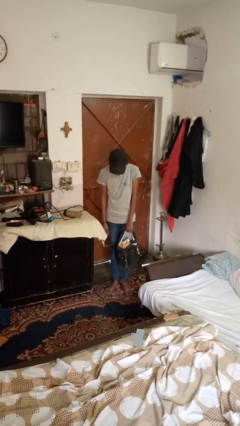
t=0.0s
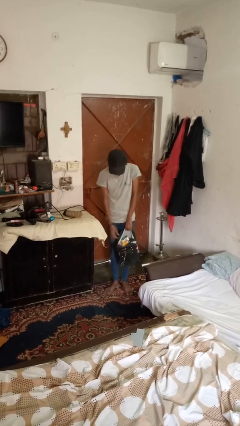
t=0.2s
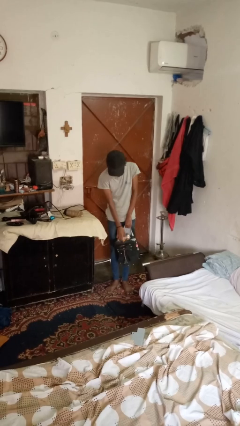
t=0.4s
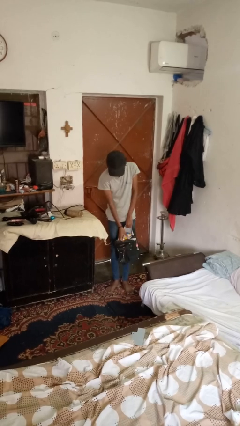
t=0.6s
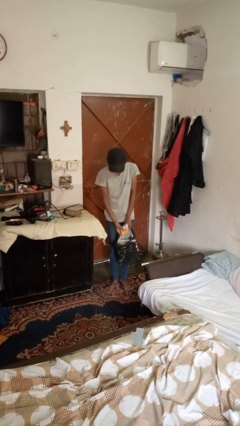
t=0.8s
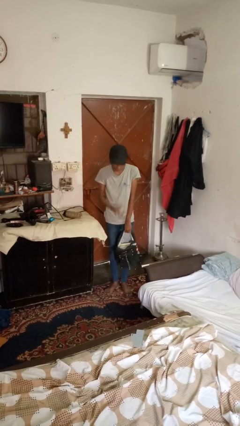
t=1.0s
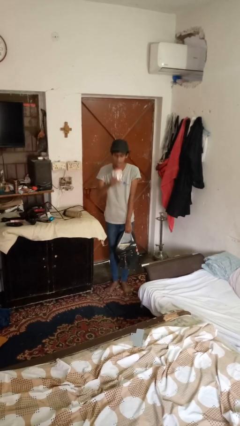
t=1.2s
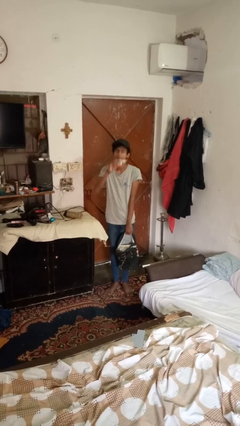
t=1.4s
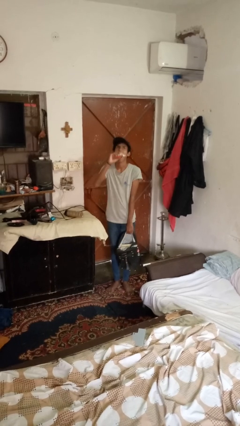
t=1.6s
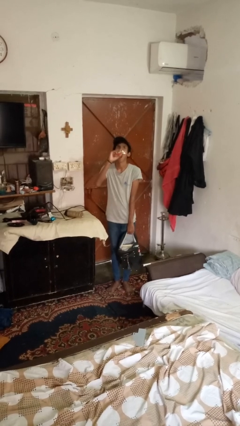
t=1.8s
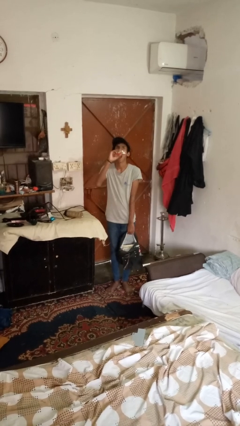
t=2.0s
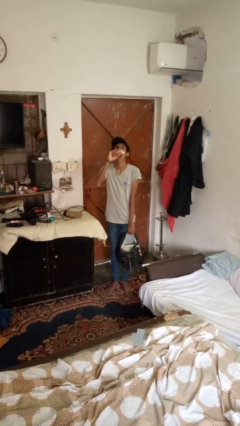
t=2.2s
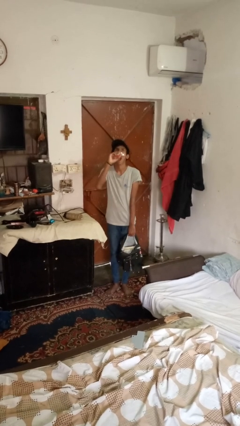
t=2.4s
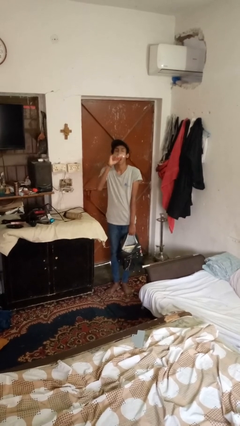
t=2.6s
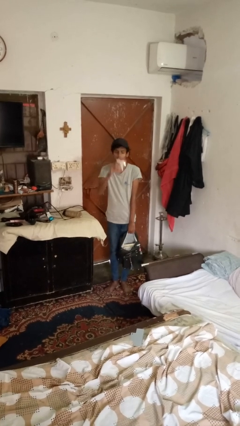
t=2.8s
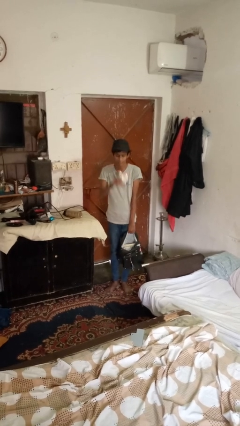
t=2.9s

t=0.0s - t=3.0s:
person eats snack from bag

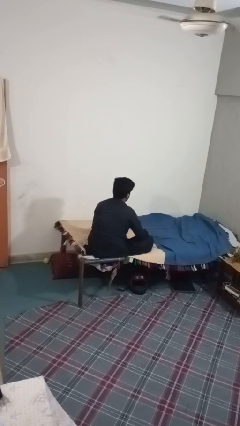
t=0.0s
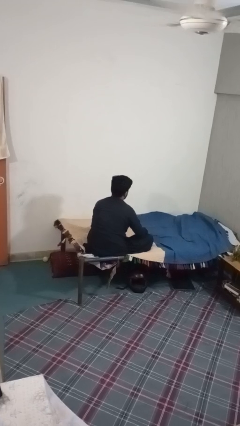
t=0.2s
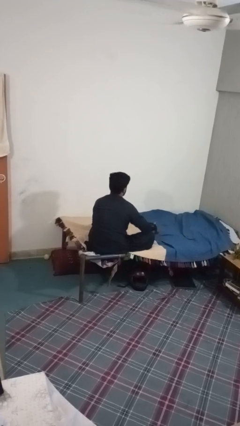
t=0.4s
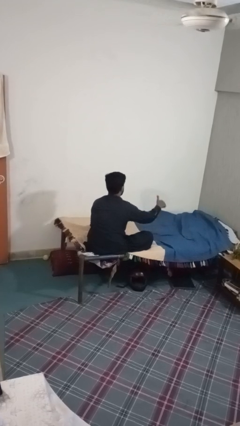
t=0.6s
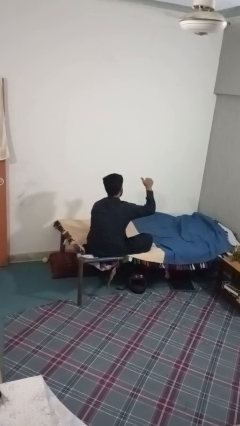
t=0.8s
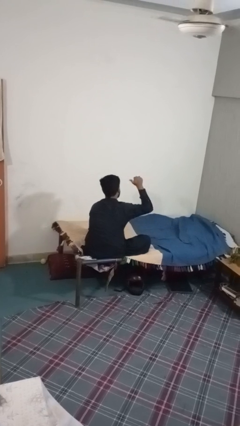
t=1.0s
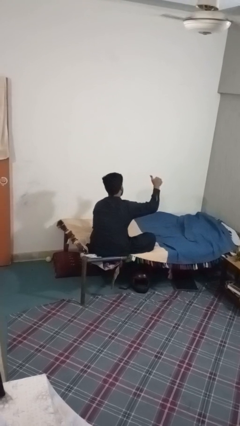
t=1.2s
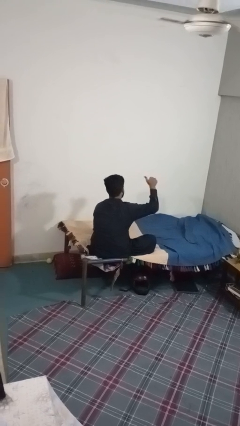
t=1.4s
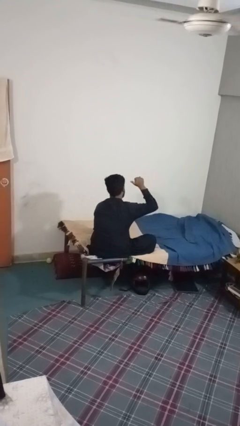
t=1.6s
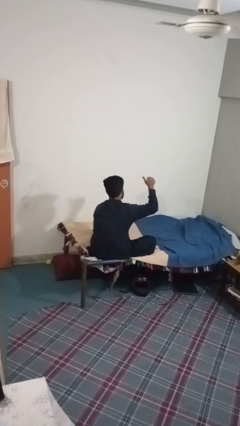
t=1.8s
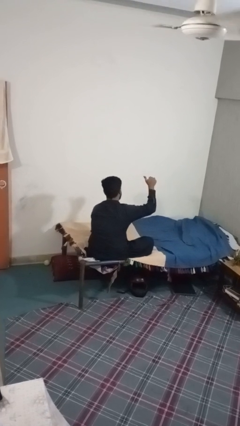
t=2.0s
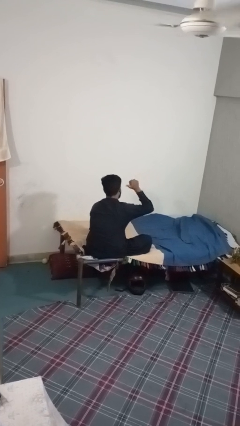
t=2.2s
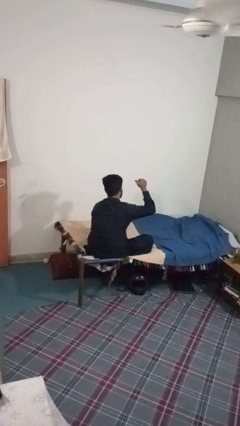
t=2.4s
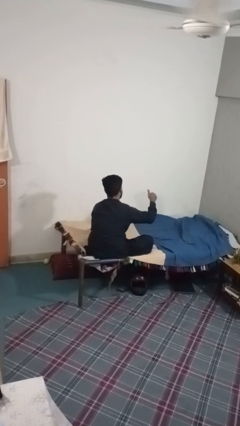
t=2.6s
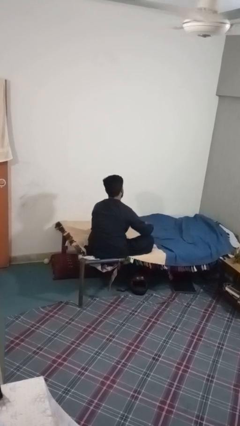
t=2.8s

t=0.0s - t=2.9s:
person gestures behind me

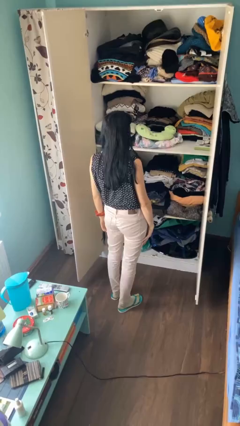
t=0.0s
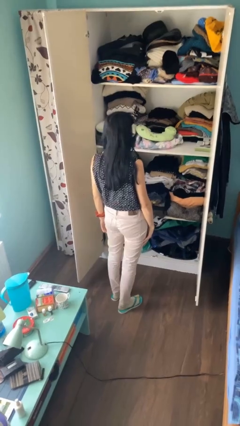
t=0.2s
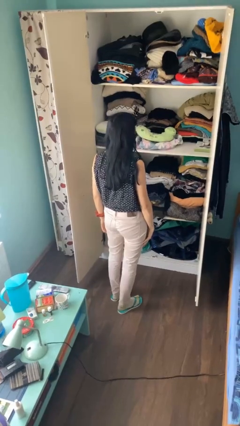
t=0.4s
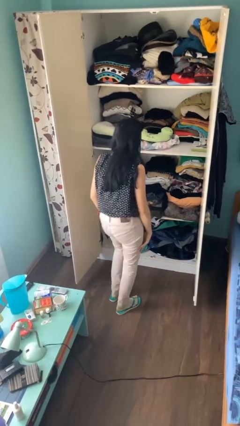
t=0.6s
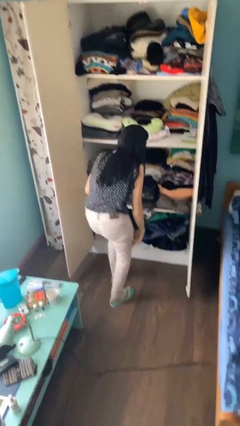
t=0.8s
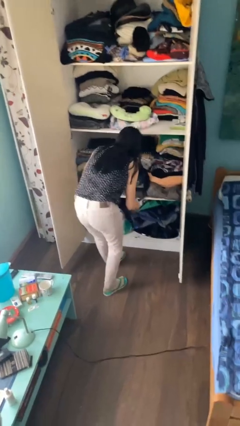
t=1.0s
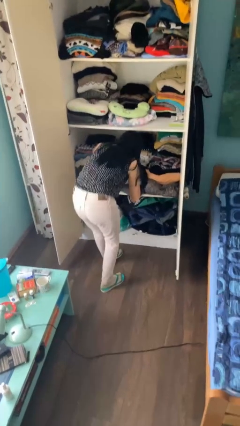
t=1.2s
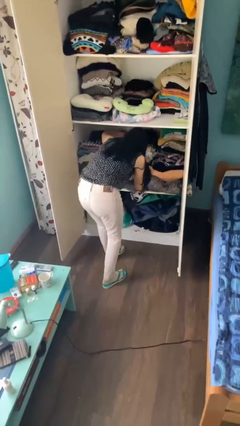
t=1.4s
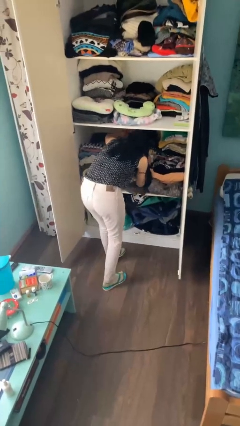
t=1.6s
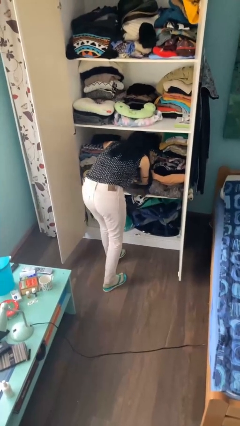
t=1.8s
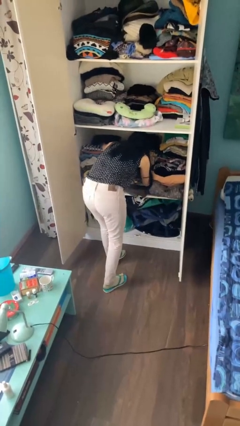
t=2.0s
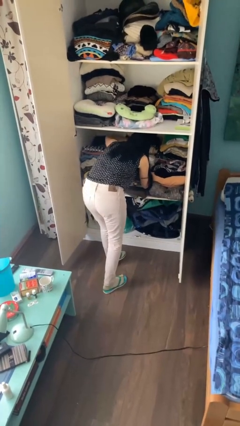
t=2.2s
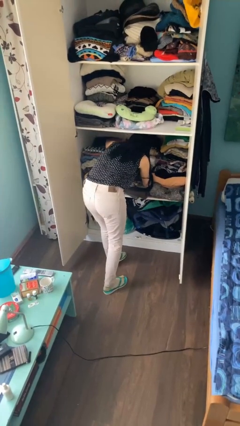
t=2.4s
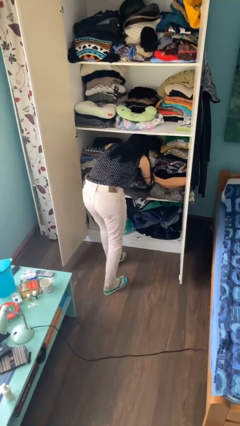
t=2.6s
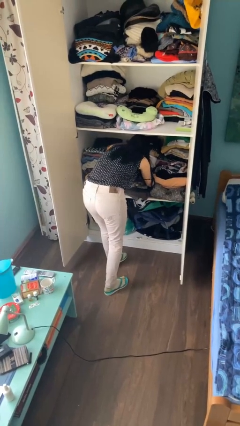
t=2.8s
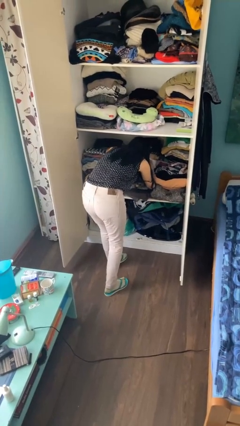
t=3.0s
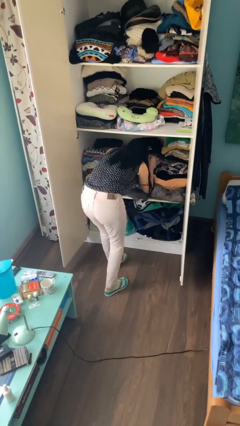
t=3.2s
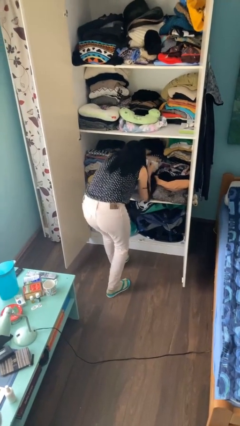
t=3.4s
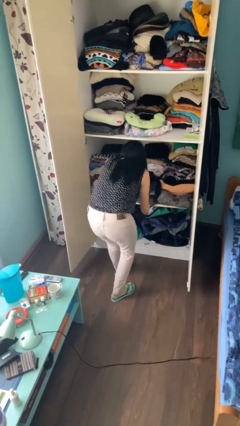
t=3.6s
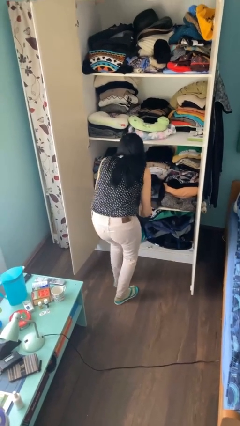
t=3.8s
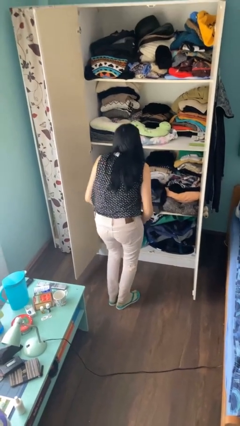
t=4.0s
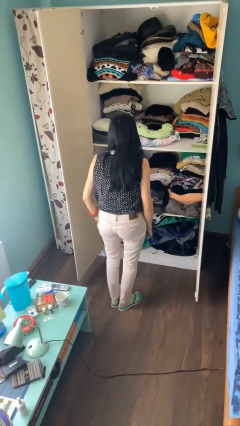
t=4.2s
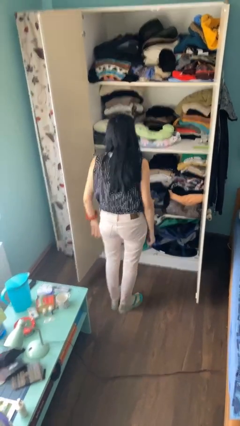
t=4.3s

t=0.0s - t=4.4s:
person searches in cabinet

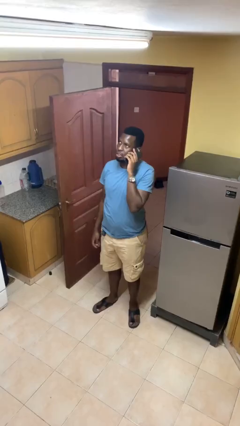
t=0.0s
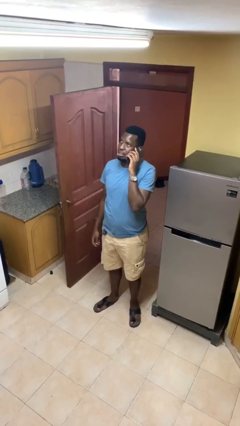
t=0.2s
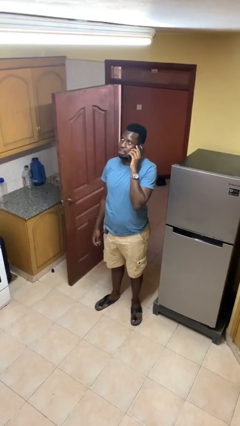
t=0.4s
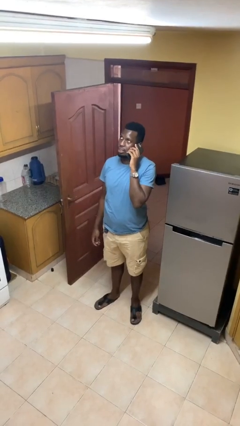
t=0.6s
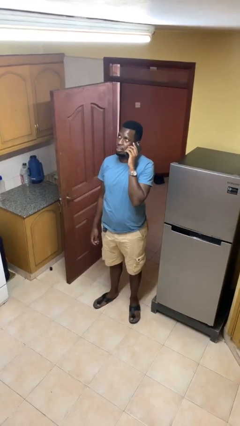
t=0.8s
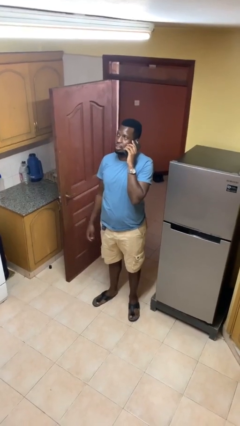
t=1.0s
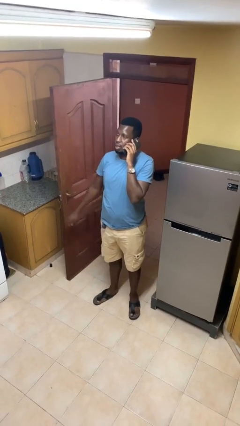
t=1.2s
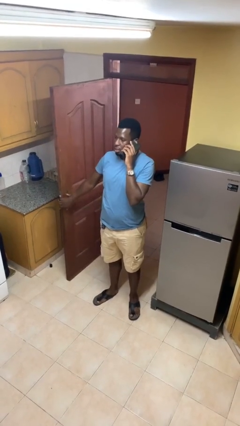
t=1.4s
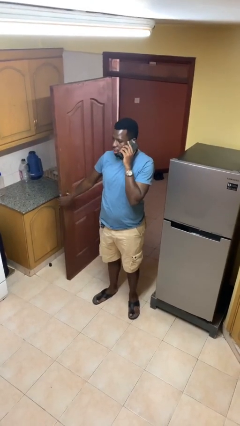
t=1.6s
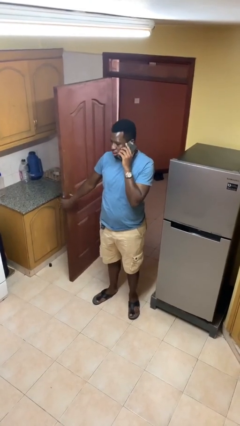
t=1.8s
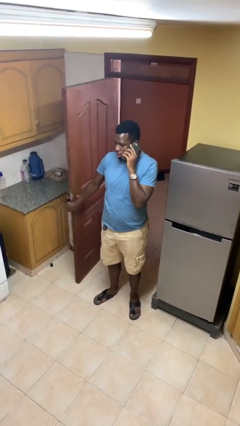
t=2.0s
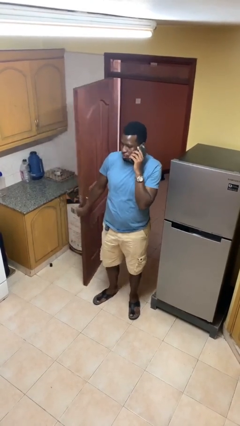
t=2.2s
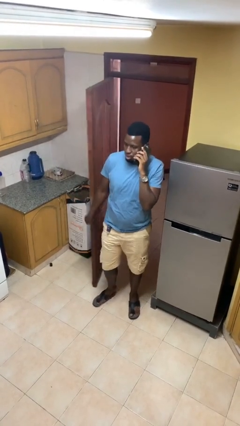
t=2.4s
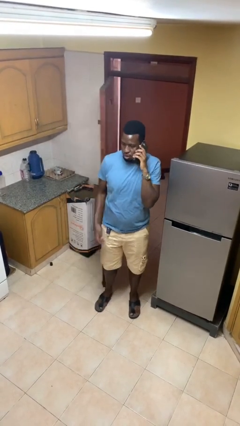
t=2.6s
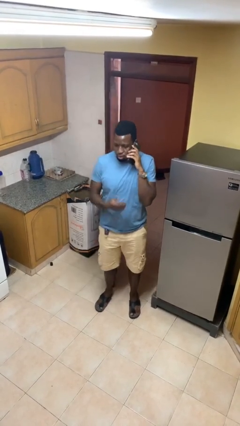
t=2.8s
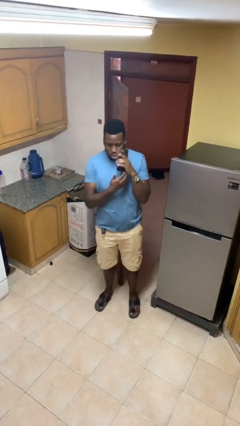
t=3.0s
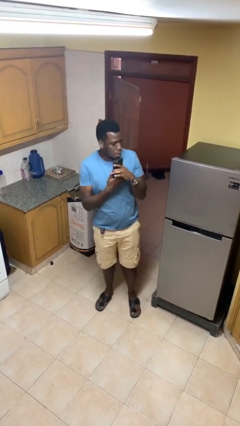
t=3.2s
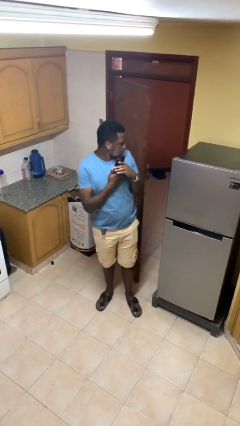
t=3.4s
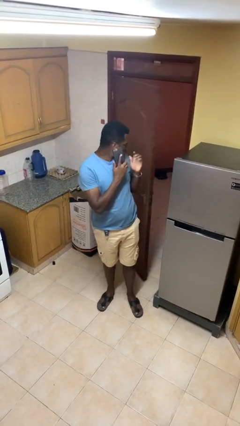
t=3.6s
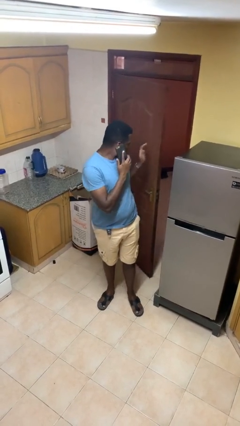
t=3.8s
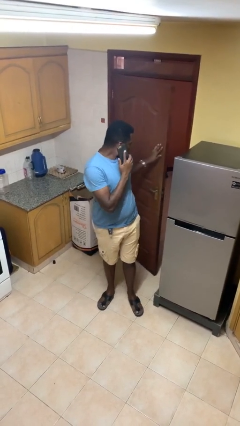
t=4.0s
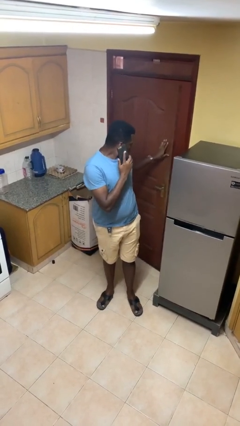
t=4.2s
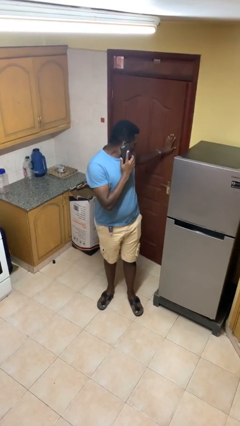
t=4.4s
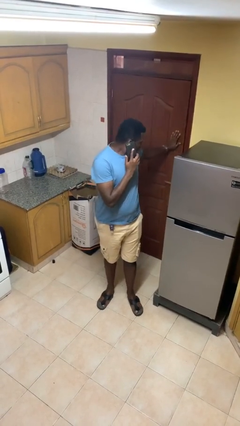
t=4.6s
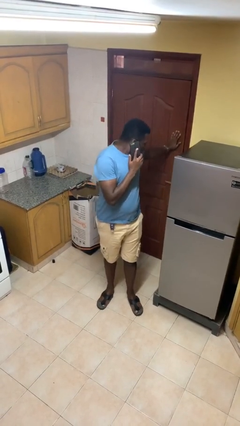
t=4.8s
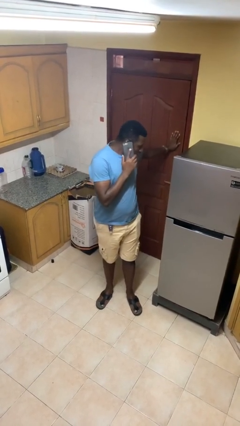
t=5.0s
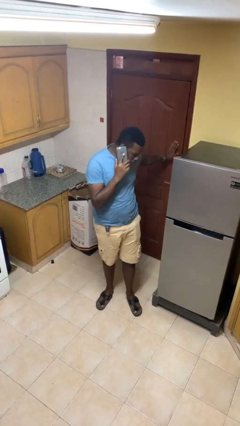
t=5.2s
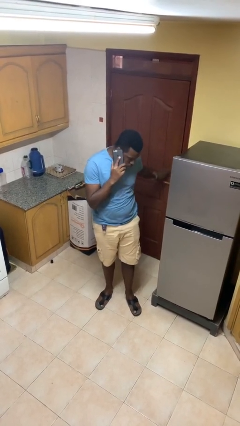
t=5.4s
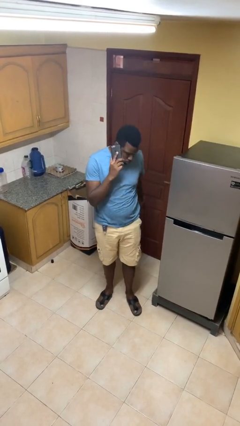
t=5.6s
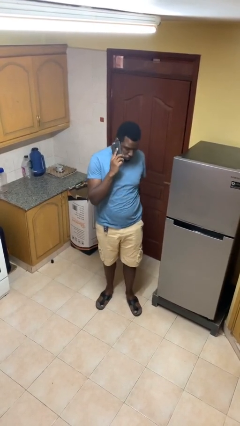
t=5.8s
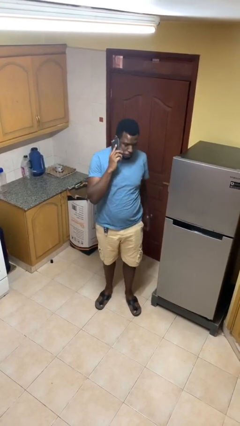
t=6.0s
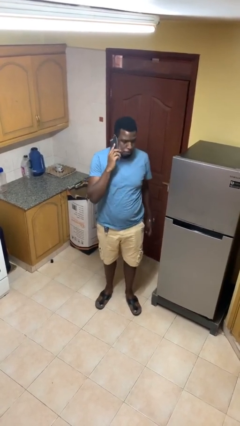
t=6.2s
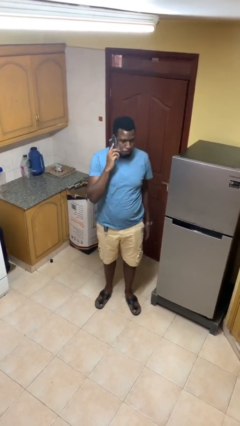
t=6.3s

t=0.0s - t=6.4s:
person closes facility door

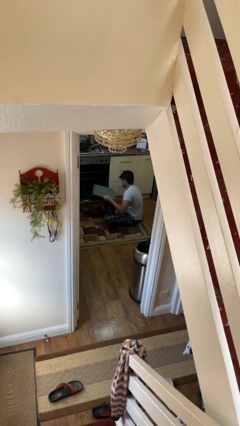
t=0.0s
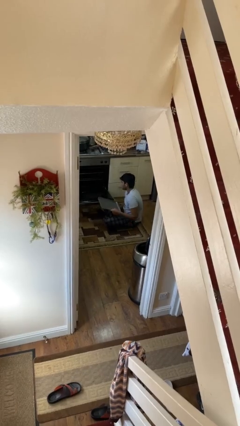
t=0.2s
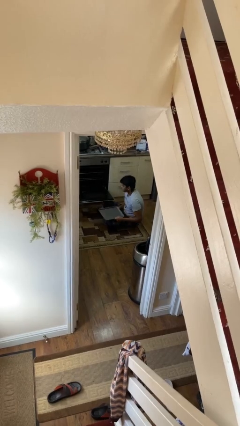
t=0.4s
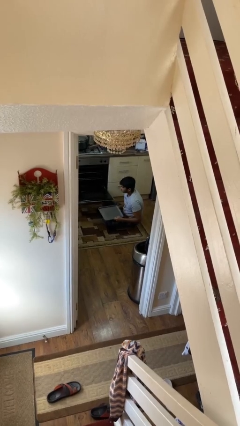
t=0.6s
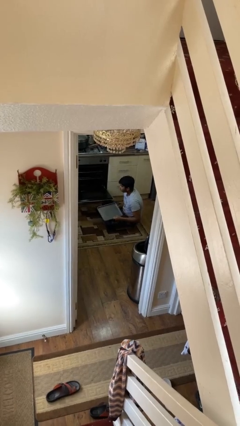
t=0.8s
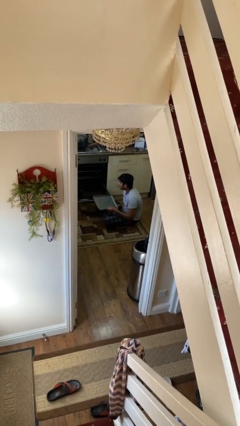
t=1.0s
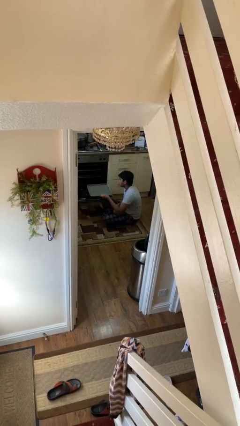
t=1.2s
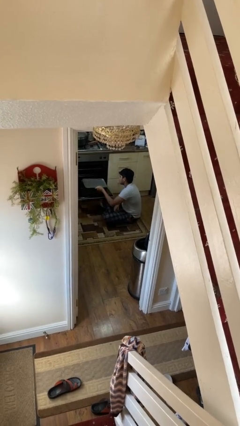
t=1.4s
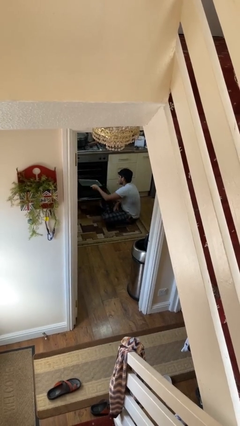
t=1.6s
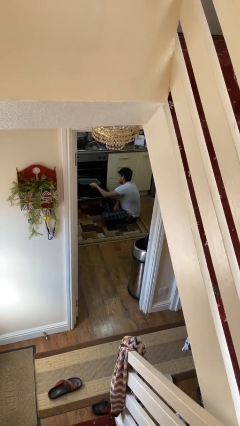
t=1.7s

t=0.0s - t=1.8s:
person takes object from oven
